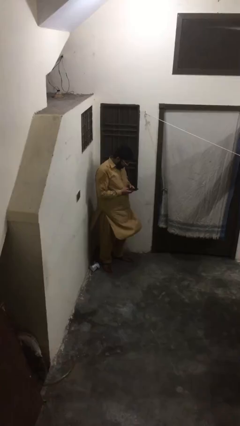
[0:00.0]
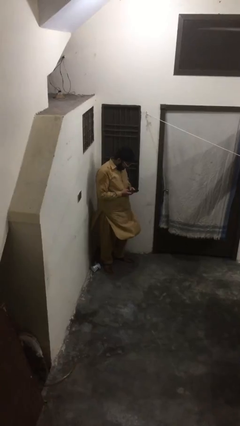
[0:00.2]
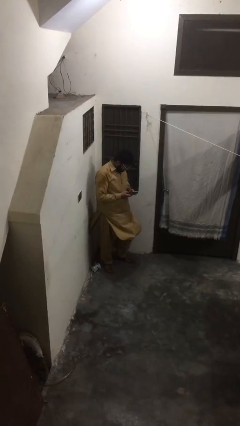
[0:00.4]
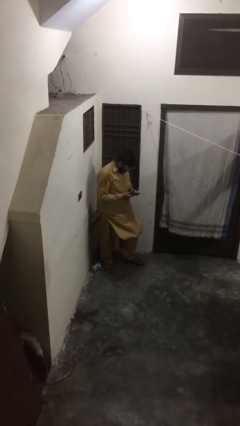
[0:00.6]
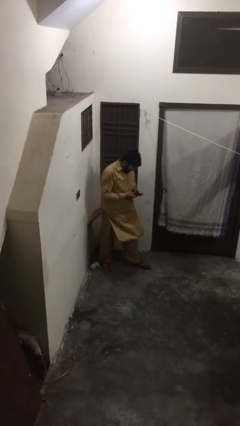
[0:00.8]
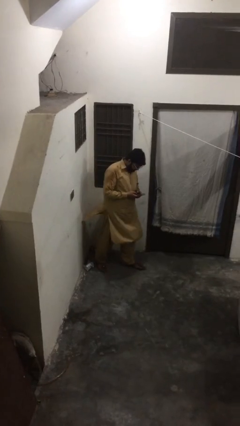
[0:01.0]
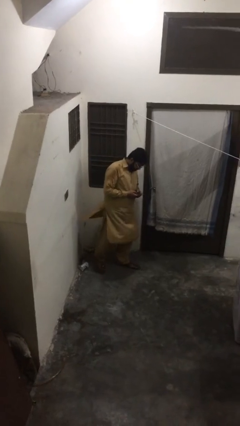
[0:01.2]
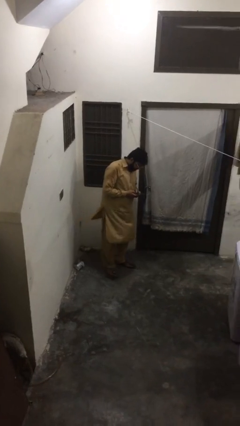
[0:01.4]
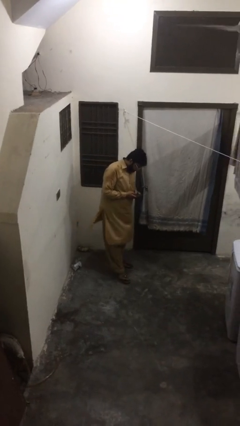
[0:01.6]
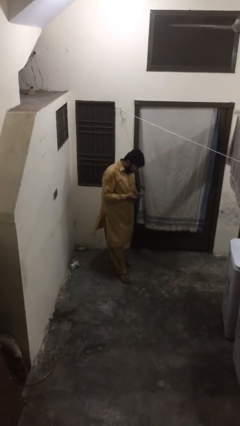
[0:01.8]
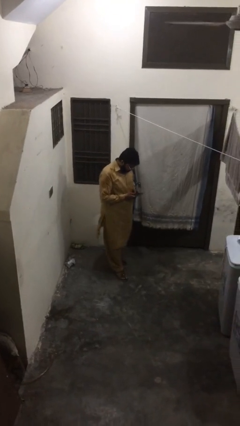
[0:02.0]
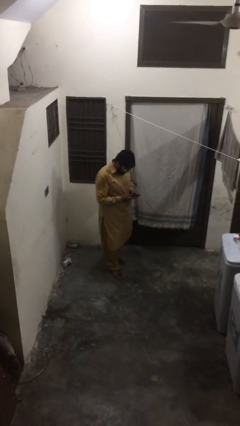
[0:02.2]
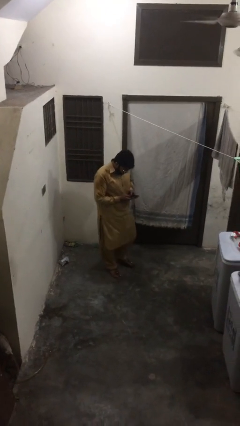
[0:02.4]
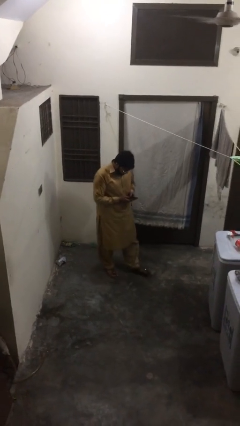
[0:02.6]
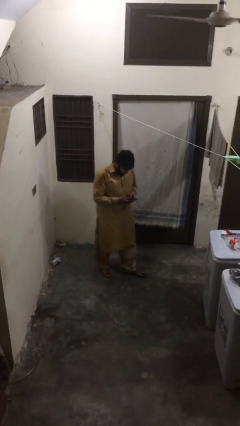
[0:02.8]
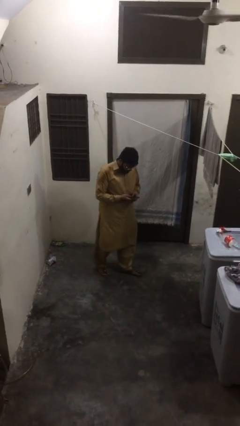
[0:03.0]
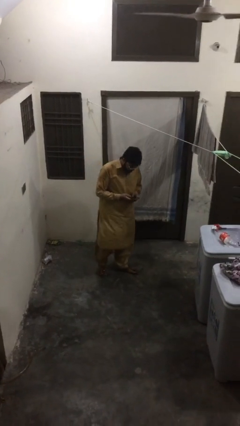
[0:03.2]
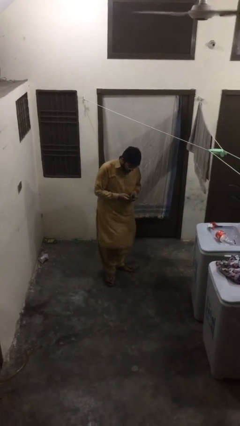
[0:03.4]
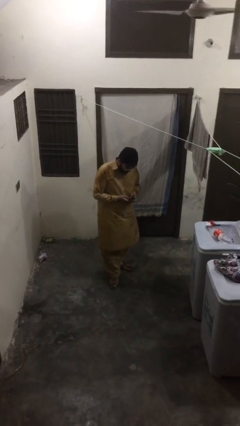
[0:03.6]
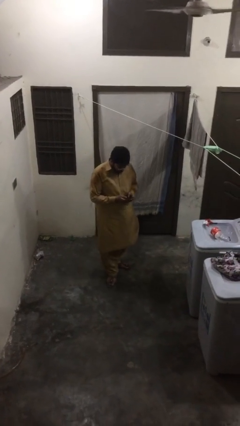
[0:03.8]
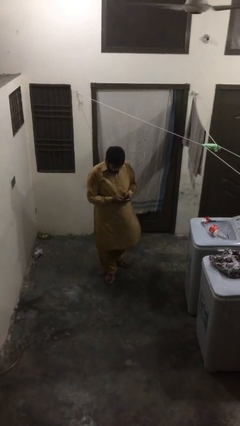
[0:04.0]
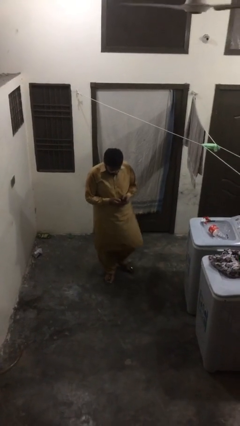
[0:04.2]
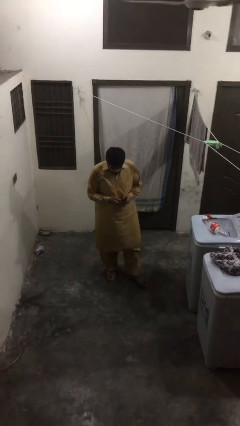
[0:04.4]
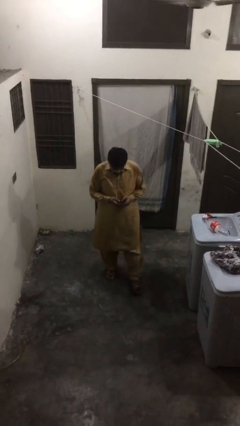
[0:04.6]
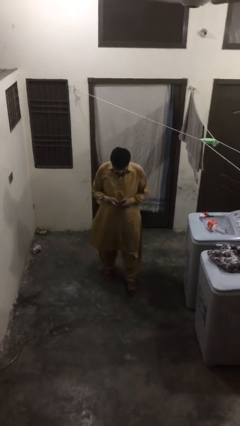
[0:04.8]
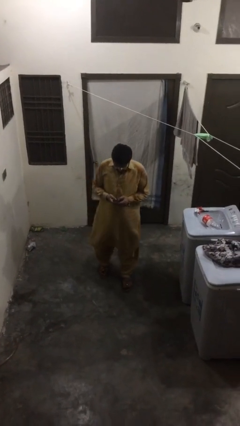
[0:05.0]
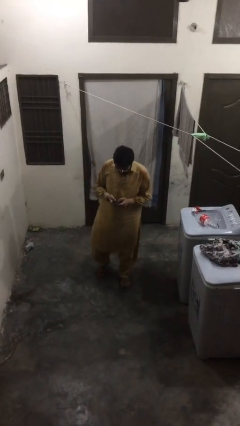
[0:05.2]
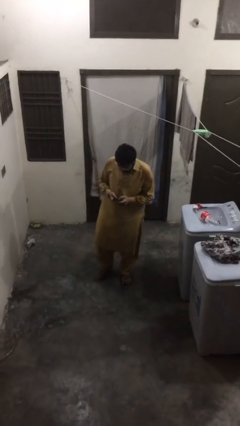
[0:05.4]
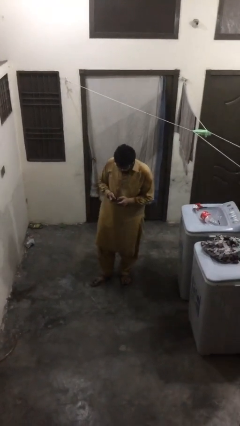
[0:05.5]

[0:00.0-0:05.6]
person texts on phone

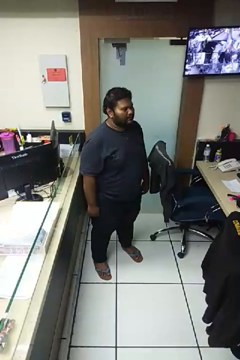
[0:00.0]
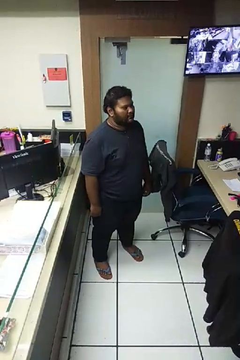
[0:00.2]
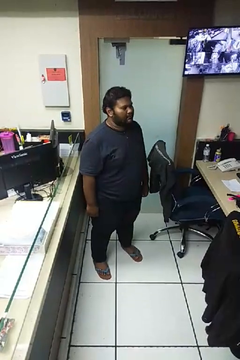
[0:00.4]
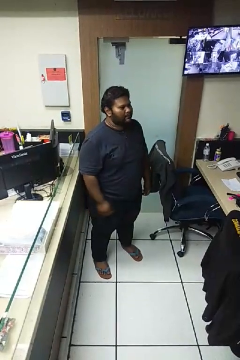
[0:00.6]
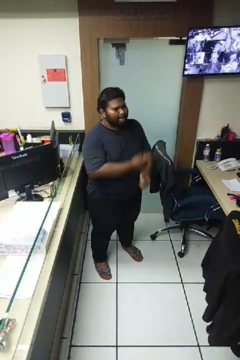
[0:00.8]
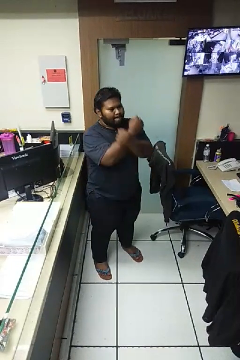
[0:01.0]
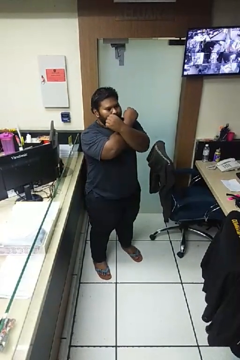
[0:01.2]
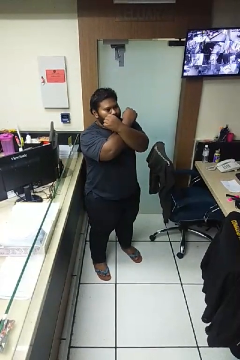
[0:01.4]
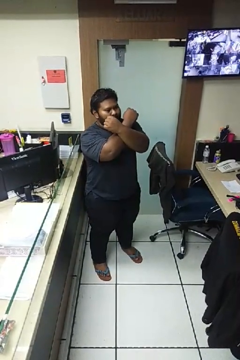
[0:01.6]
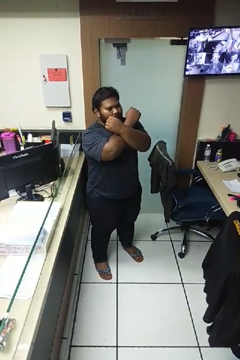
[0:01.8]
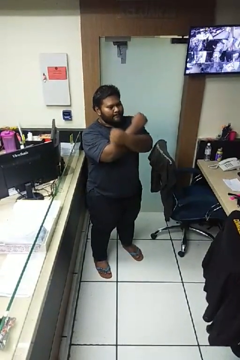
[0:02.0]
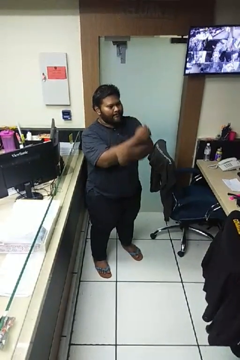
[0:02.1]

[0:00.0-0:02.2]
person gestures arms x

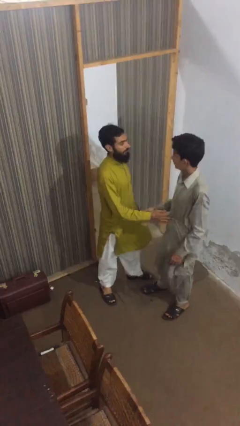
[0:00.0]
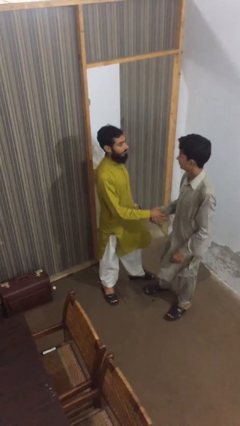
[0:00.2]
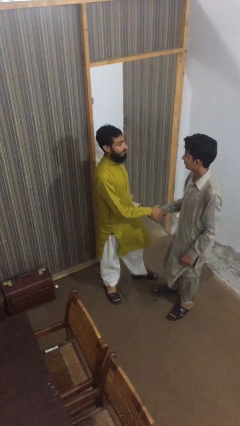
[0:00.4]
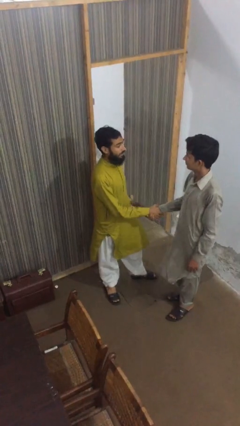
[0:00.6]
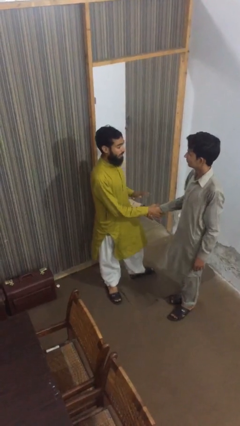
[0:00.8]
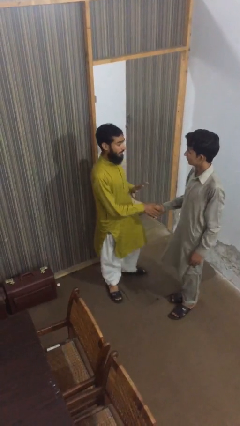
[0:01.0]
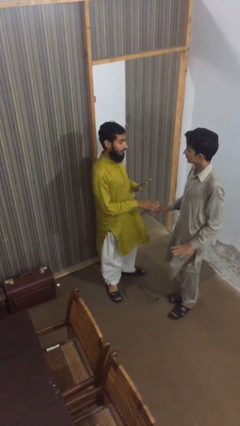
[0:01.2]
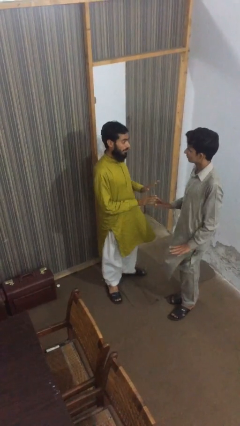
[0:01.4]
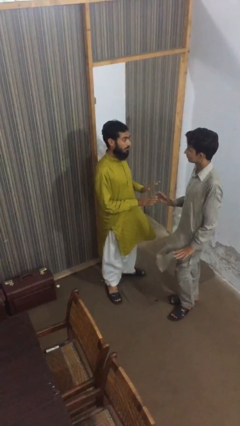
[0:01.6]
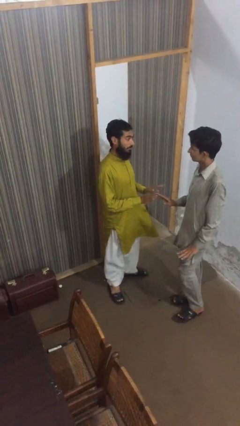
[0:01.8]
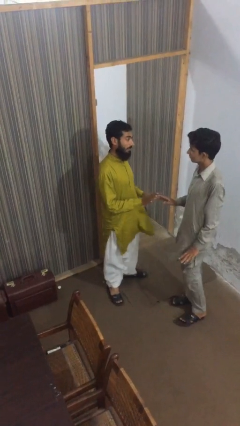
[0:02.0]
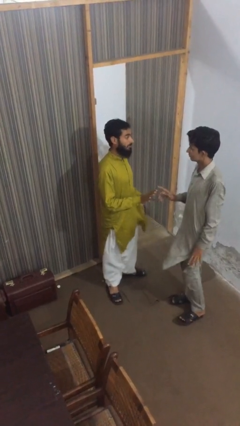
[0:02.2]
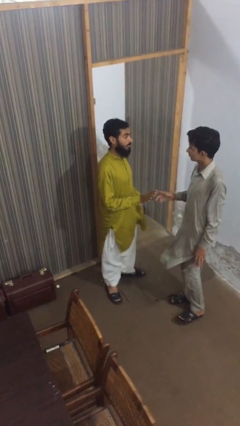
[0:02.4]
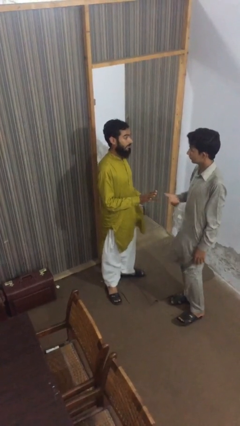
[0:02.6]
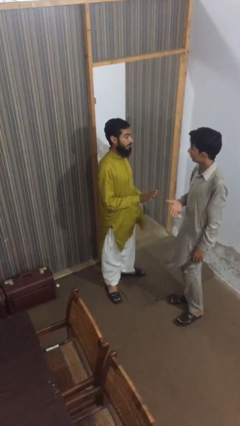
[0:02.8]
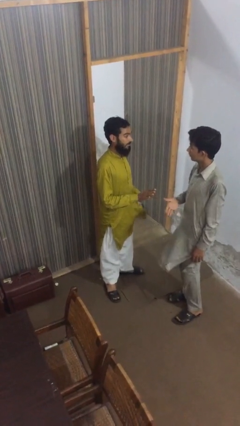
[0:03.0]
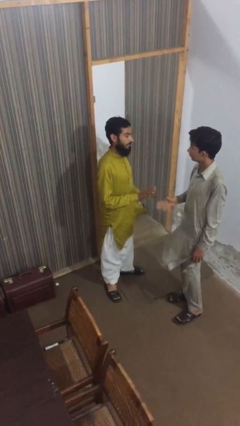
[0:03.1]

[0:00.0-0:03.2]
person talks to person

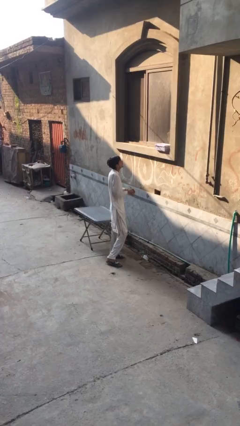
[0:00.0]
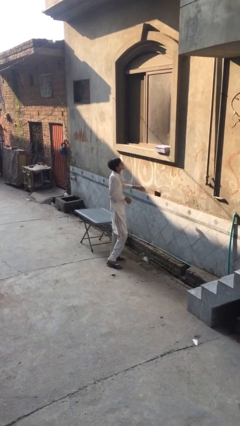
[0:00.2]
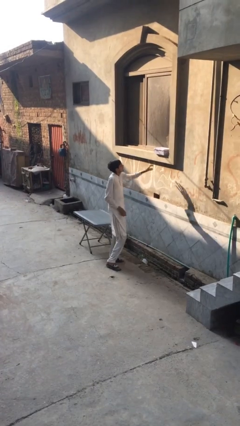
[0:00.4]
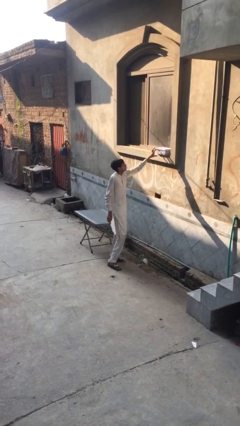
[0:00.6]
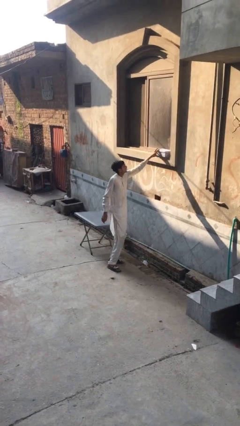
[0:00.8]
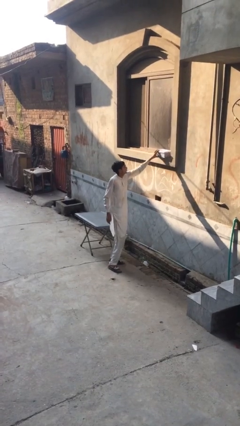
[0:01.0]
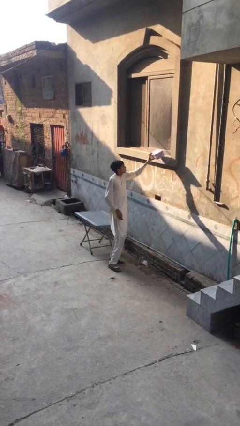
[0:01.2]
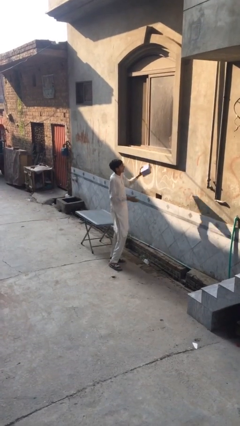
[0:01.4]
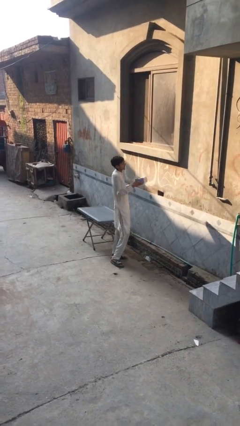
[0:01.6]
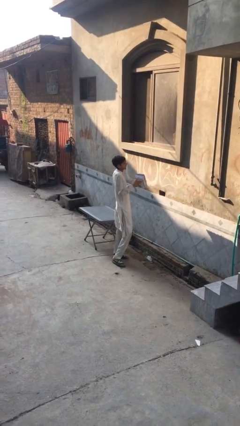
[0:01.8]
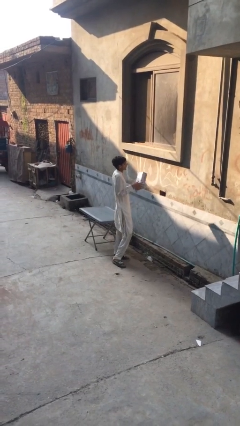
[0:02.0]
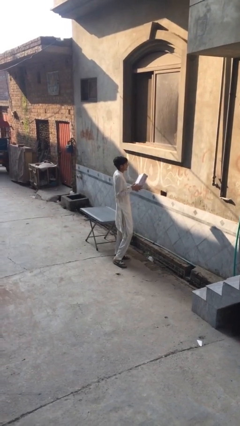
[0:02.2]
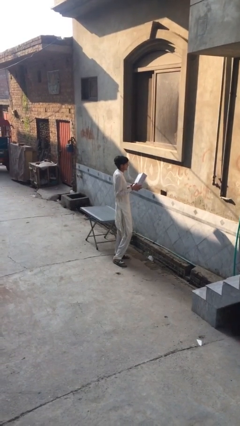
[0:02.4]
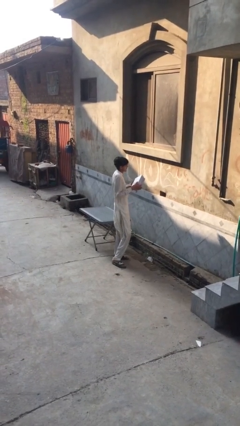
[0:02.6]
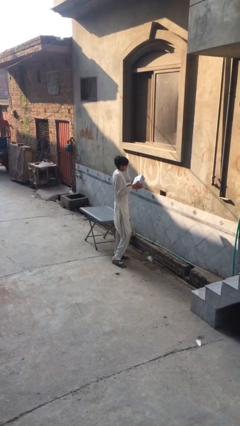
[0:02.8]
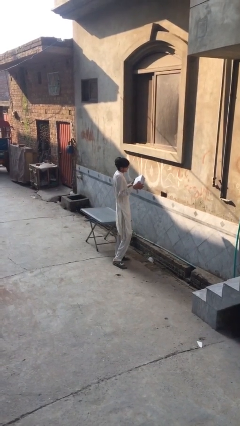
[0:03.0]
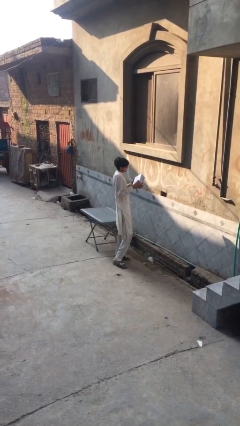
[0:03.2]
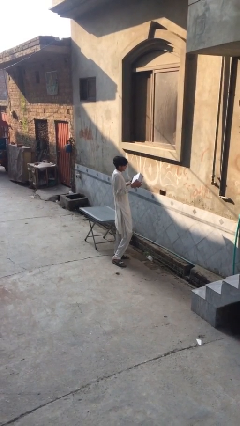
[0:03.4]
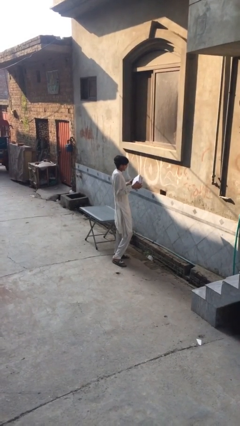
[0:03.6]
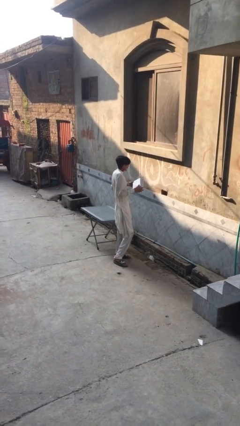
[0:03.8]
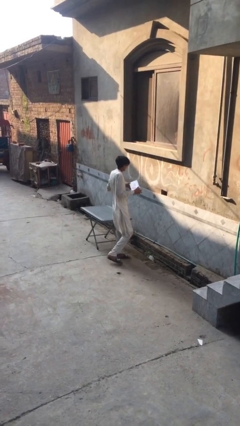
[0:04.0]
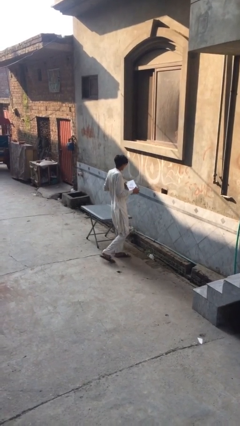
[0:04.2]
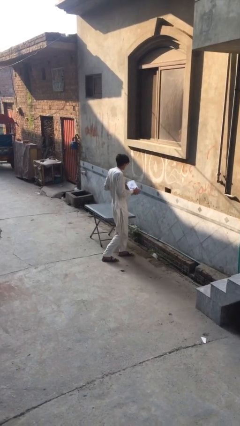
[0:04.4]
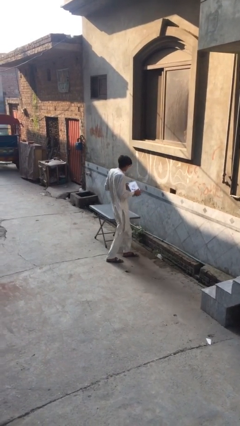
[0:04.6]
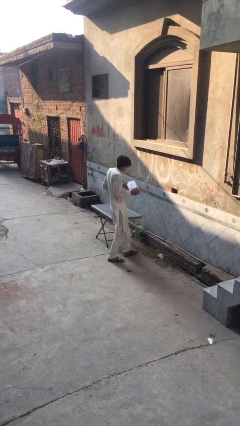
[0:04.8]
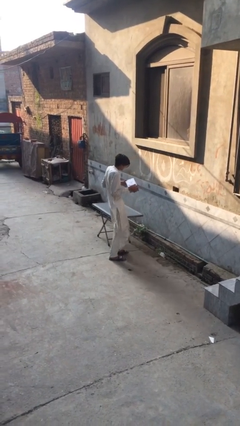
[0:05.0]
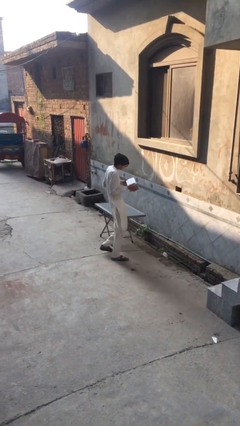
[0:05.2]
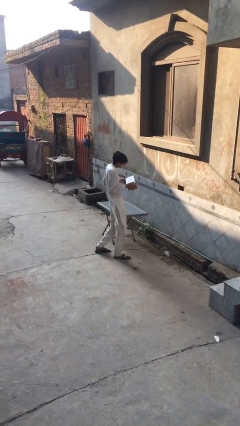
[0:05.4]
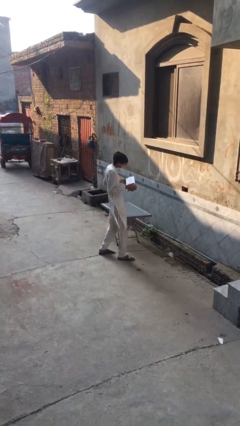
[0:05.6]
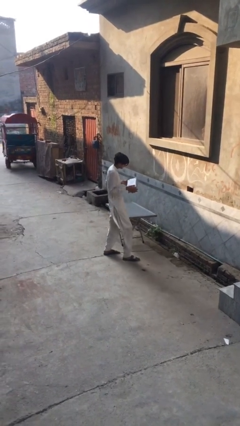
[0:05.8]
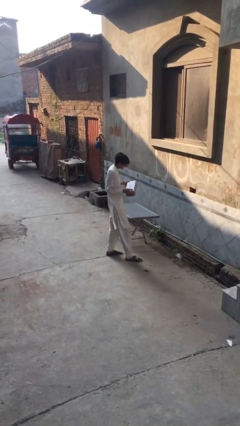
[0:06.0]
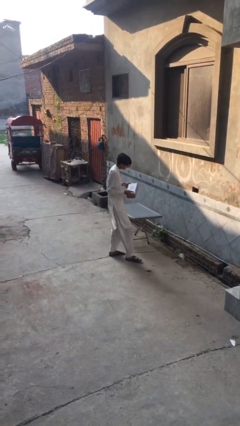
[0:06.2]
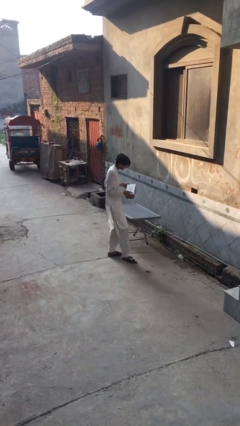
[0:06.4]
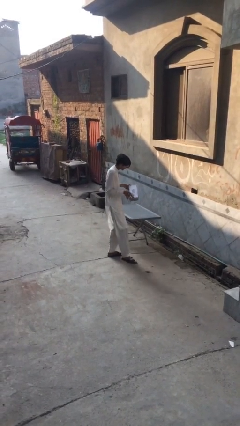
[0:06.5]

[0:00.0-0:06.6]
person picks up object from shelf

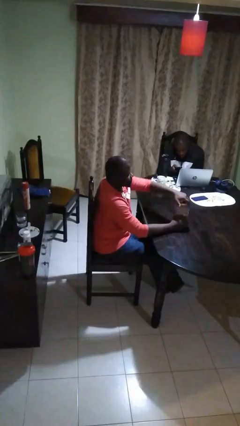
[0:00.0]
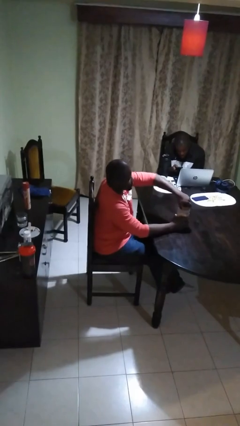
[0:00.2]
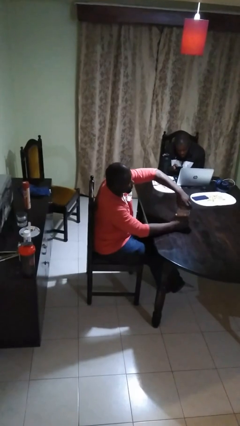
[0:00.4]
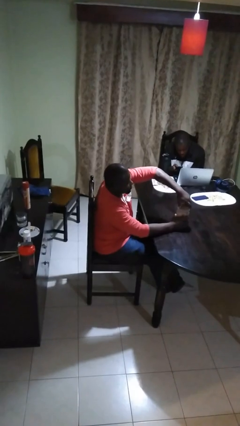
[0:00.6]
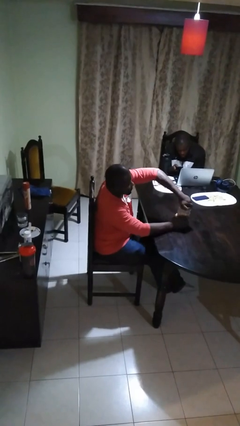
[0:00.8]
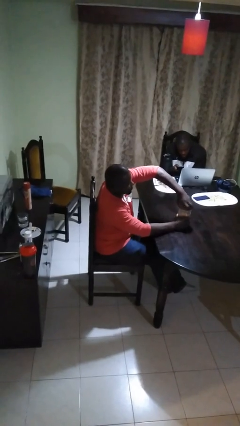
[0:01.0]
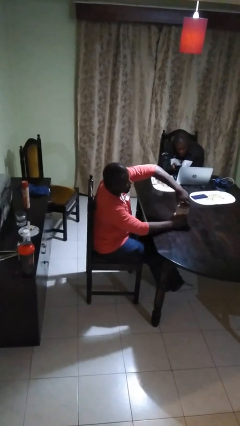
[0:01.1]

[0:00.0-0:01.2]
person closes jar
